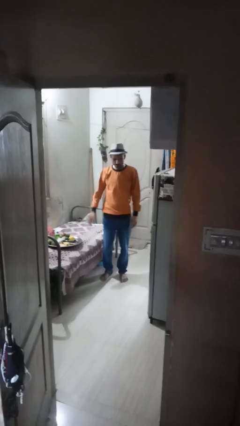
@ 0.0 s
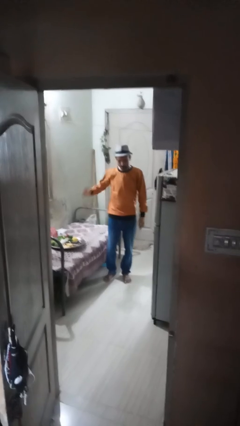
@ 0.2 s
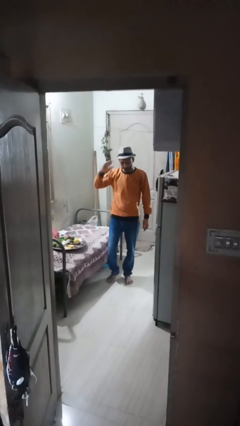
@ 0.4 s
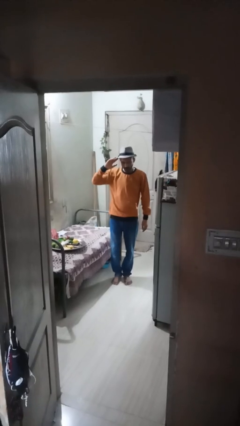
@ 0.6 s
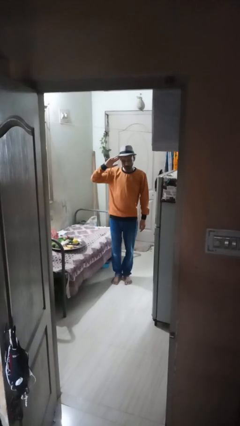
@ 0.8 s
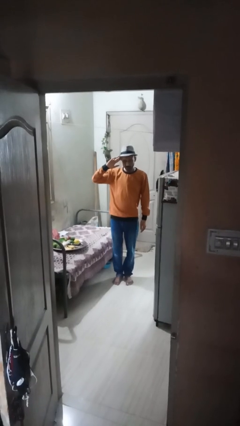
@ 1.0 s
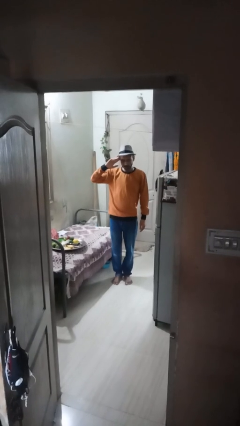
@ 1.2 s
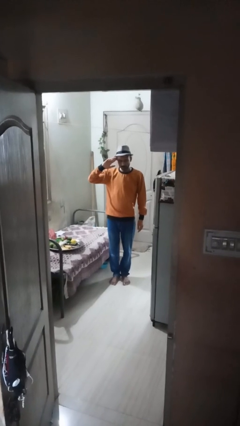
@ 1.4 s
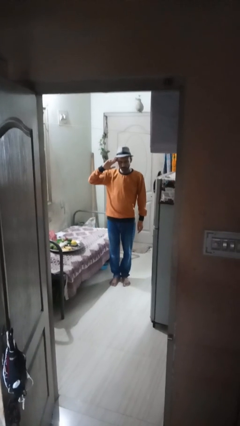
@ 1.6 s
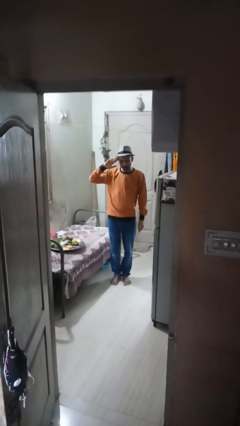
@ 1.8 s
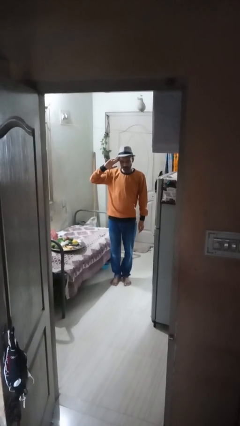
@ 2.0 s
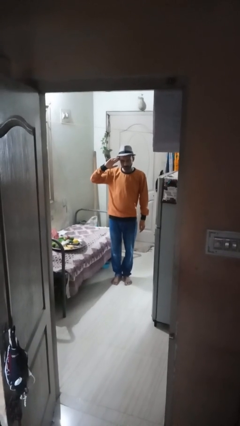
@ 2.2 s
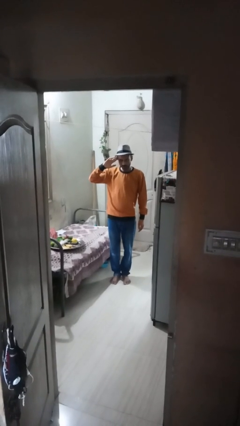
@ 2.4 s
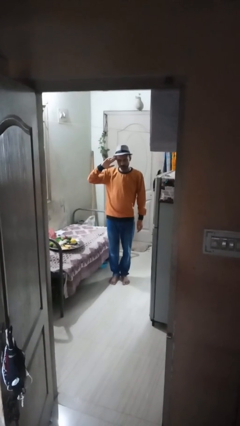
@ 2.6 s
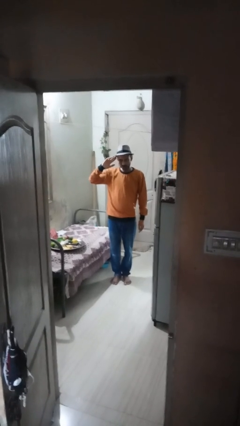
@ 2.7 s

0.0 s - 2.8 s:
person salutes

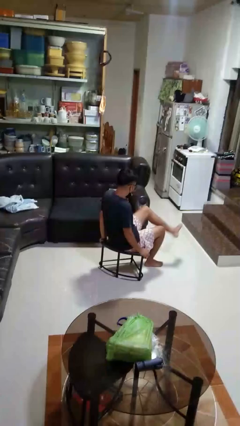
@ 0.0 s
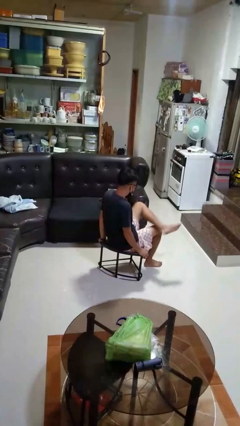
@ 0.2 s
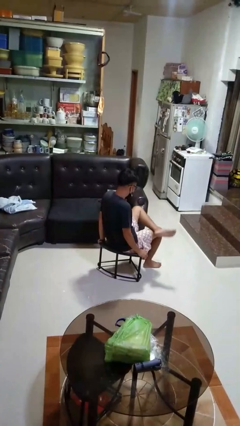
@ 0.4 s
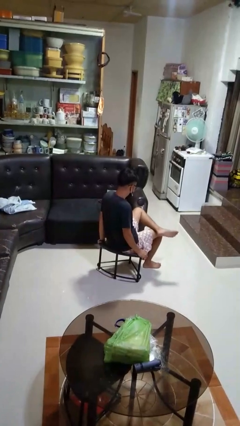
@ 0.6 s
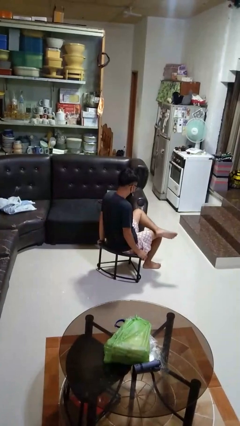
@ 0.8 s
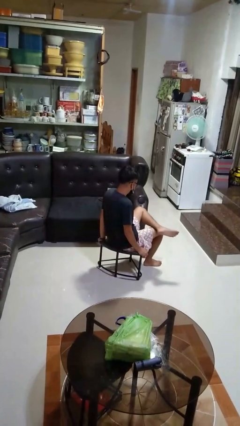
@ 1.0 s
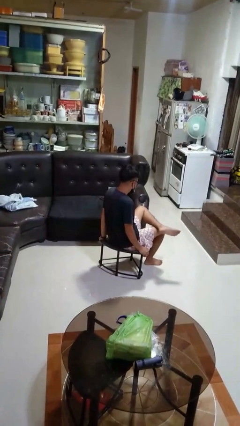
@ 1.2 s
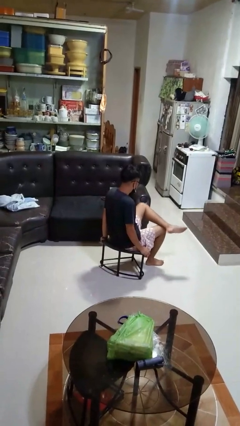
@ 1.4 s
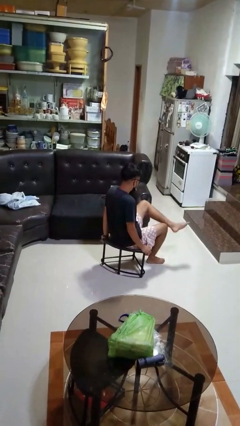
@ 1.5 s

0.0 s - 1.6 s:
person crosses legs

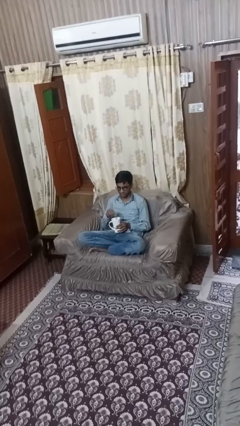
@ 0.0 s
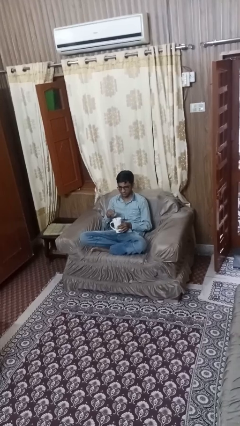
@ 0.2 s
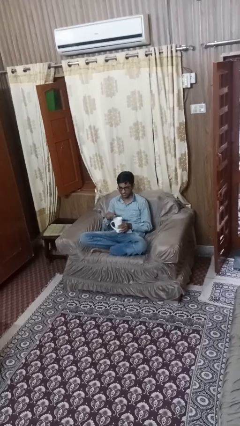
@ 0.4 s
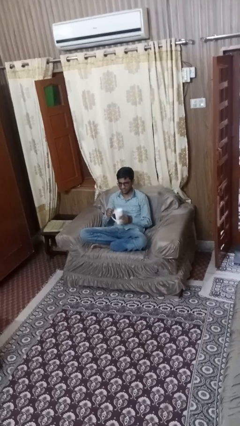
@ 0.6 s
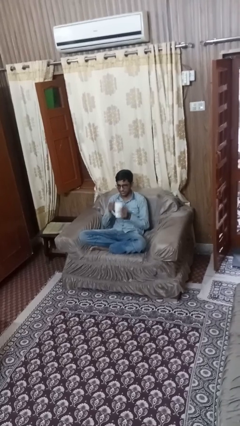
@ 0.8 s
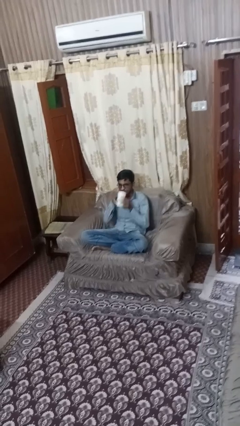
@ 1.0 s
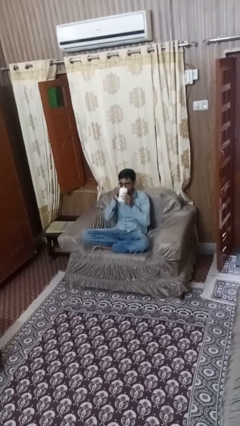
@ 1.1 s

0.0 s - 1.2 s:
person stirs mug

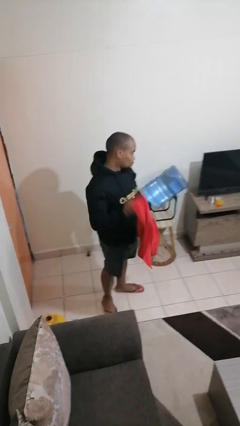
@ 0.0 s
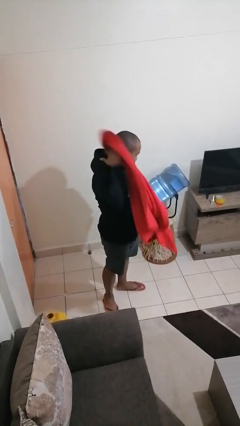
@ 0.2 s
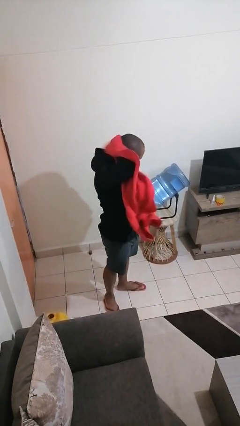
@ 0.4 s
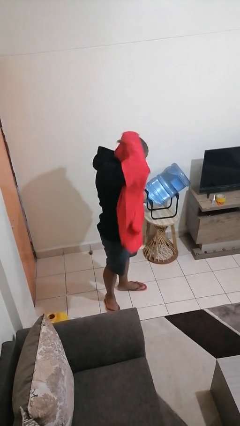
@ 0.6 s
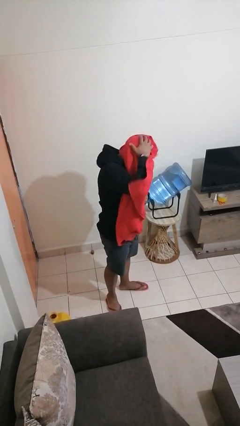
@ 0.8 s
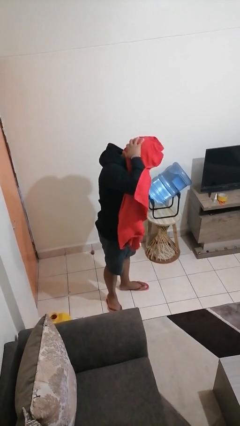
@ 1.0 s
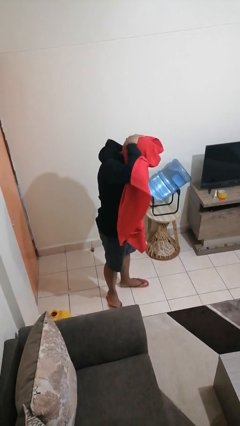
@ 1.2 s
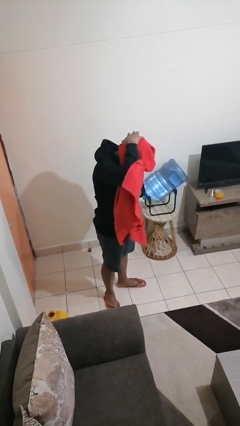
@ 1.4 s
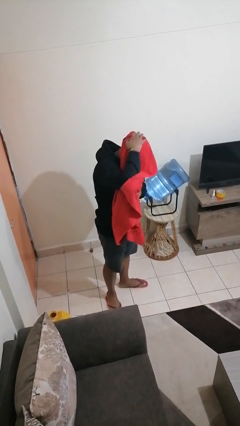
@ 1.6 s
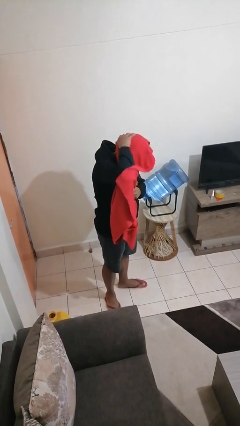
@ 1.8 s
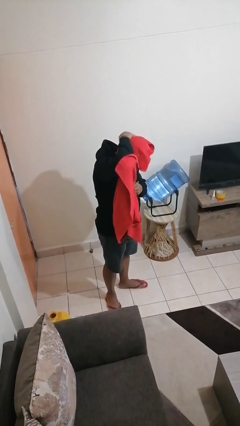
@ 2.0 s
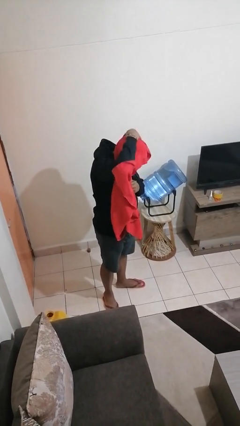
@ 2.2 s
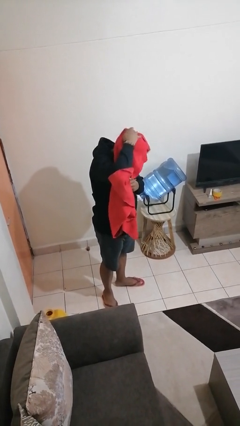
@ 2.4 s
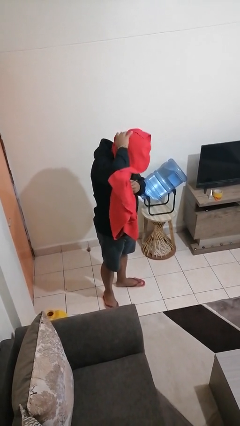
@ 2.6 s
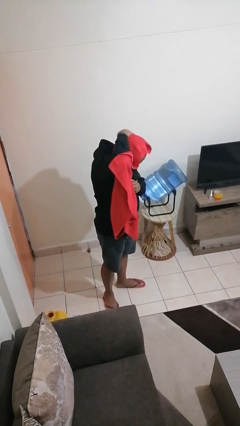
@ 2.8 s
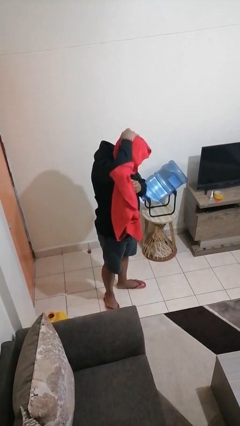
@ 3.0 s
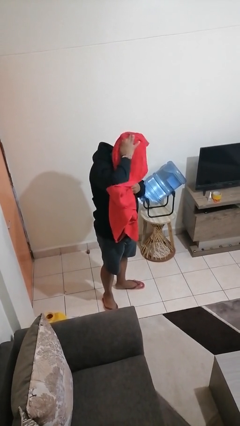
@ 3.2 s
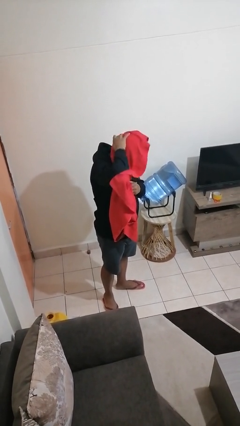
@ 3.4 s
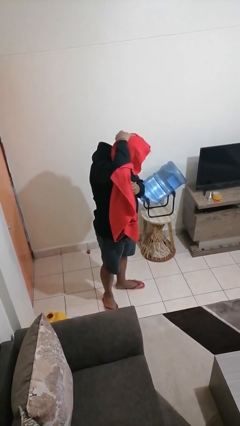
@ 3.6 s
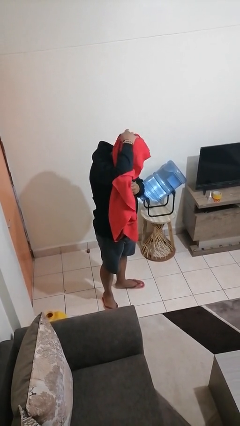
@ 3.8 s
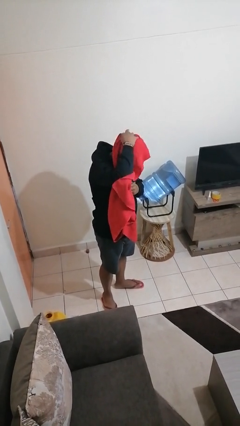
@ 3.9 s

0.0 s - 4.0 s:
person dries hair with towel

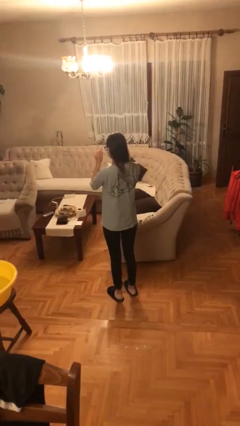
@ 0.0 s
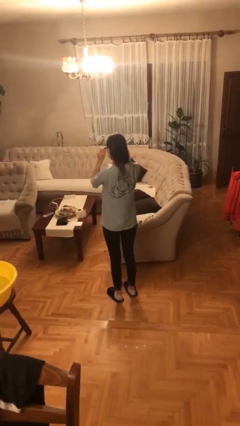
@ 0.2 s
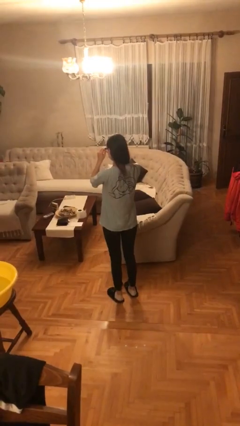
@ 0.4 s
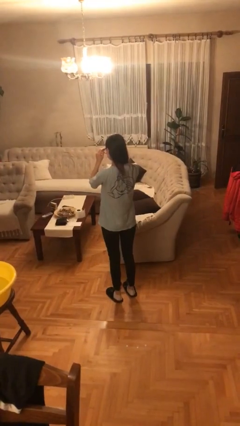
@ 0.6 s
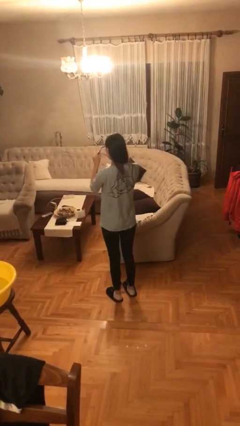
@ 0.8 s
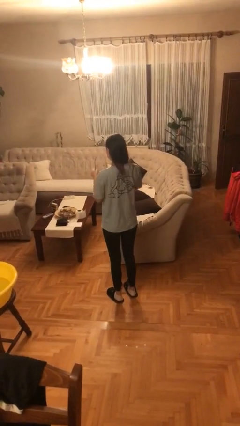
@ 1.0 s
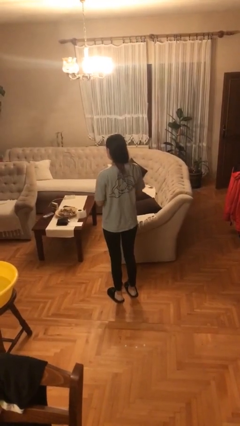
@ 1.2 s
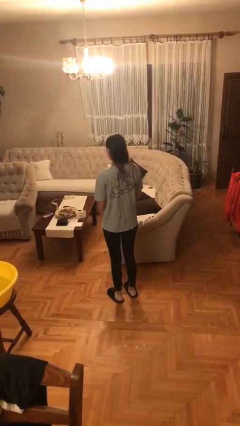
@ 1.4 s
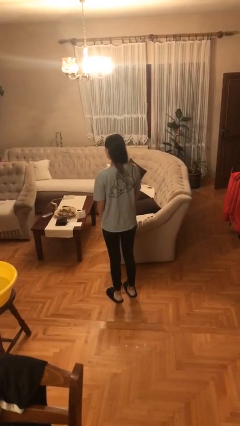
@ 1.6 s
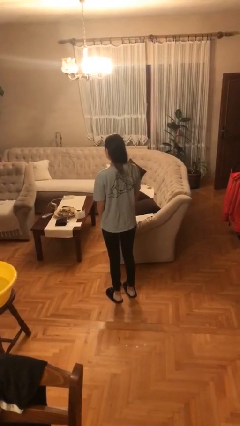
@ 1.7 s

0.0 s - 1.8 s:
person takes off glasses

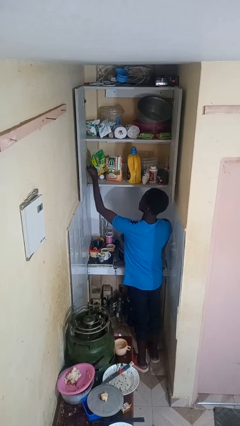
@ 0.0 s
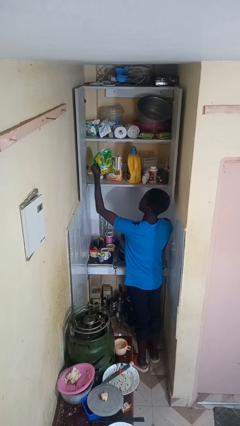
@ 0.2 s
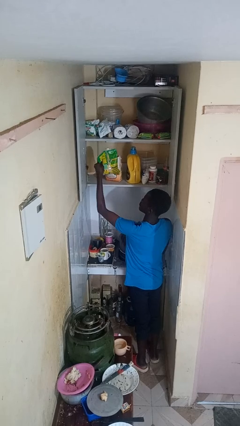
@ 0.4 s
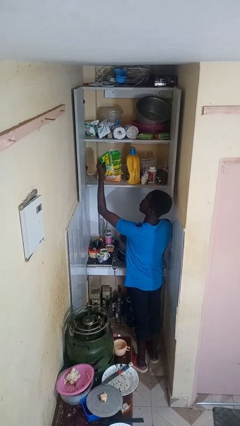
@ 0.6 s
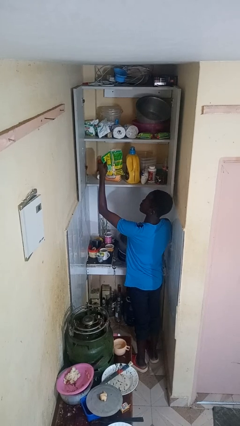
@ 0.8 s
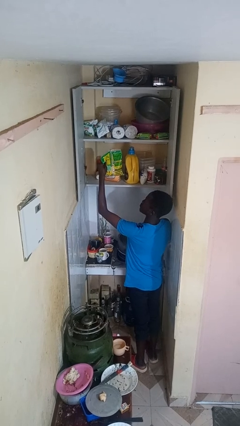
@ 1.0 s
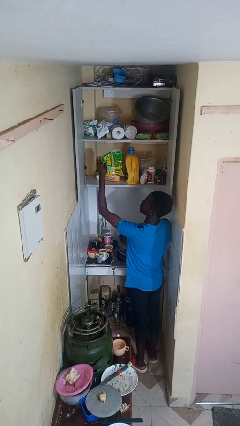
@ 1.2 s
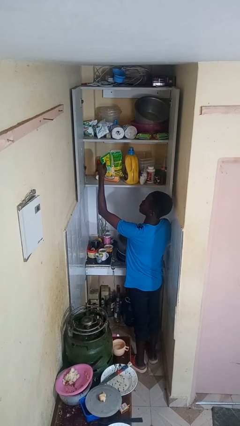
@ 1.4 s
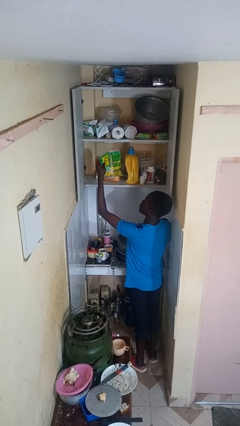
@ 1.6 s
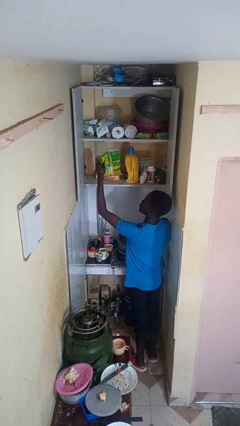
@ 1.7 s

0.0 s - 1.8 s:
person takes object from cabinet

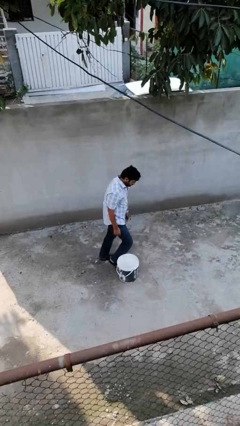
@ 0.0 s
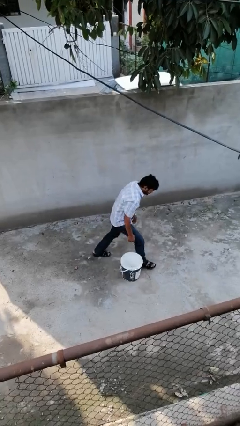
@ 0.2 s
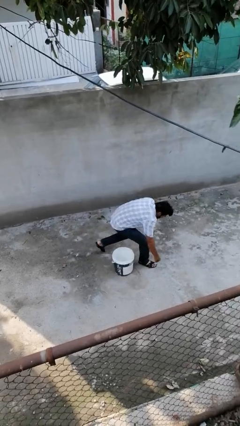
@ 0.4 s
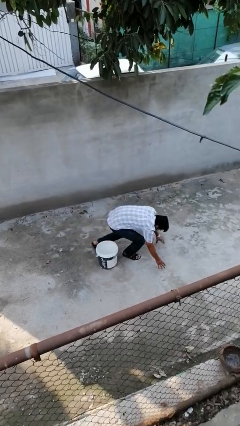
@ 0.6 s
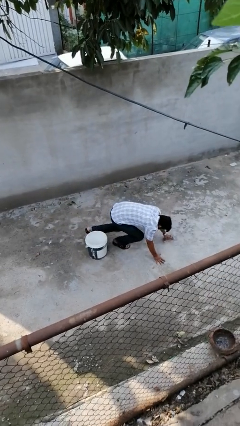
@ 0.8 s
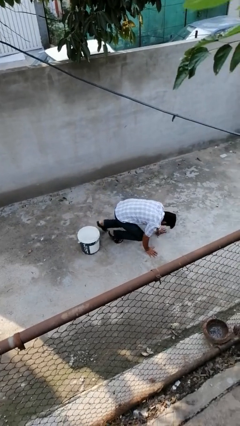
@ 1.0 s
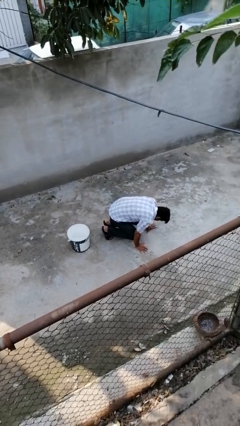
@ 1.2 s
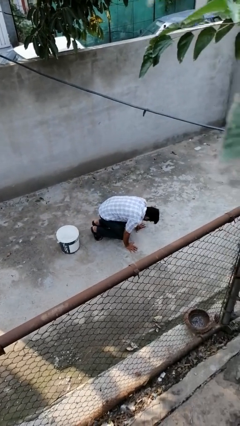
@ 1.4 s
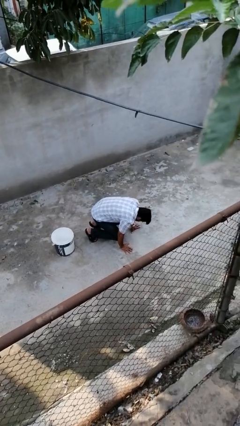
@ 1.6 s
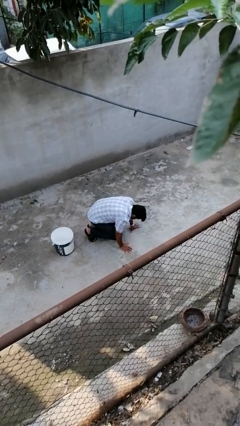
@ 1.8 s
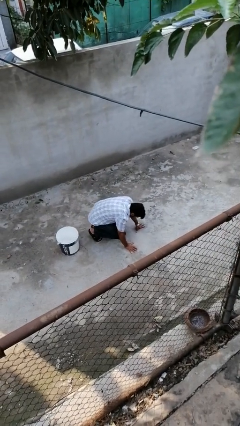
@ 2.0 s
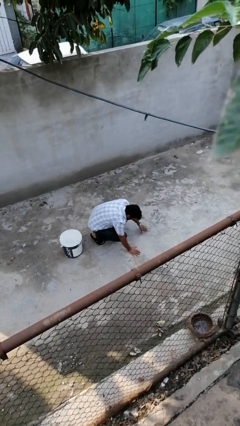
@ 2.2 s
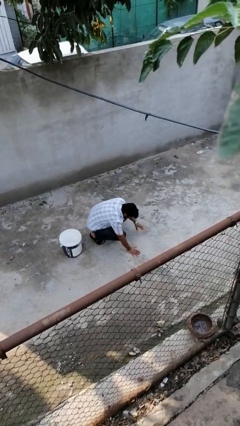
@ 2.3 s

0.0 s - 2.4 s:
person trips on object on floor

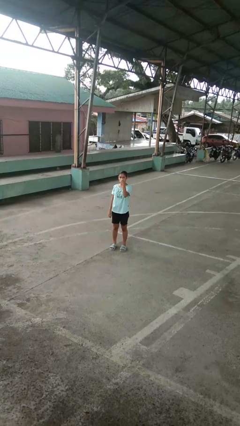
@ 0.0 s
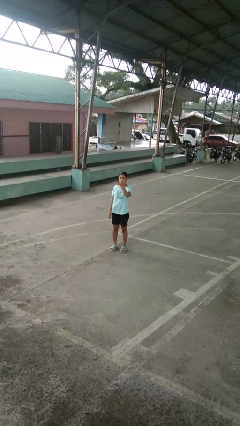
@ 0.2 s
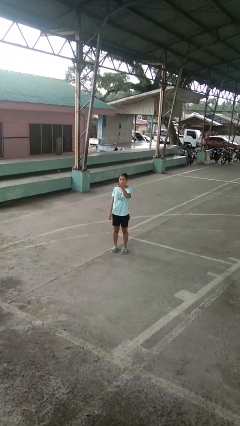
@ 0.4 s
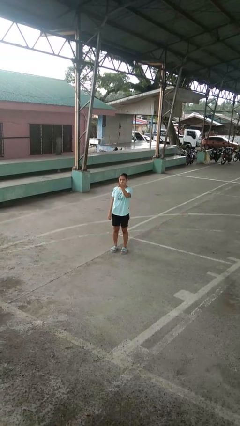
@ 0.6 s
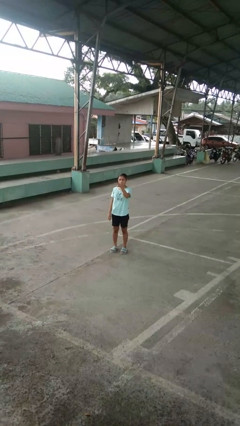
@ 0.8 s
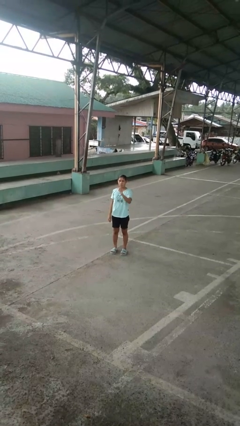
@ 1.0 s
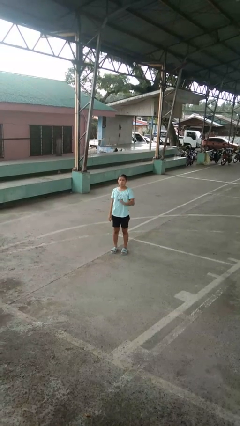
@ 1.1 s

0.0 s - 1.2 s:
person gestures watch closely

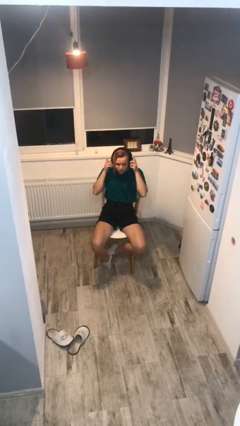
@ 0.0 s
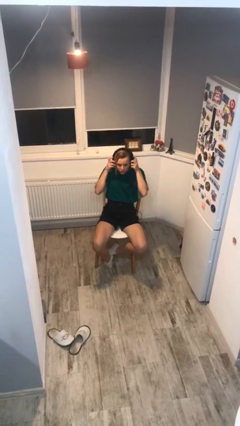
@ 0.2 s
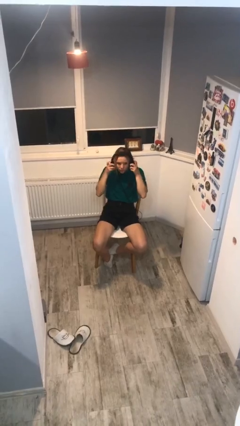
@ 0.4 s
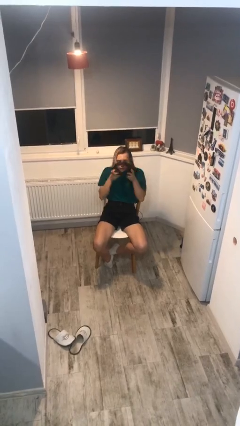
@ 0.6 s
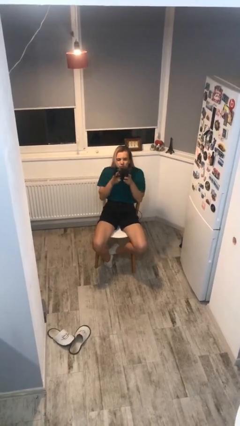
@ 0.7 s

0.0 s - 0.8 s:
person takes off headphones
